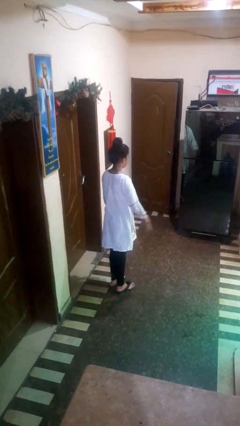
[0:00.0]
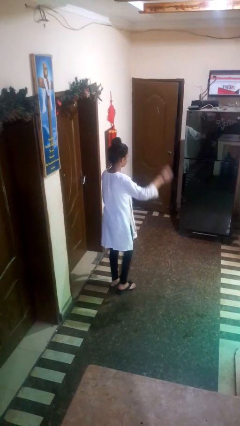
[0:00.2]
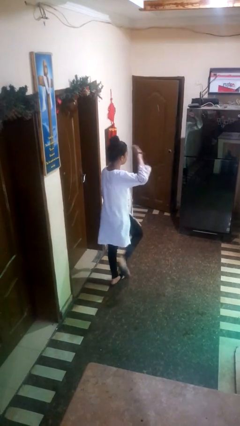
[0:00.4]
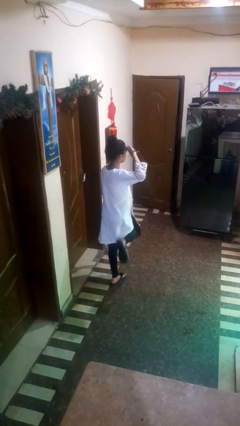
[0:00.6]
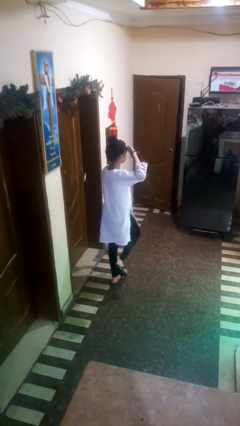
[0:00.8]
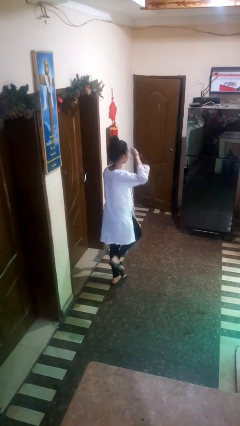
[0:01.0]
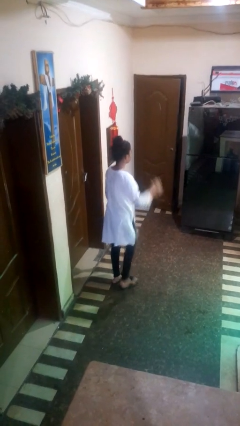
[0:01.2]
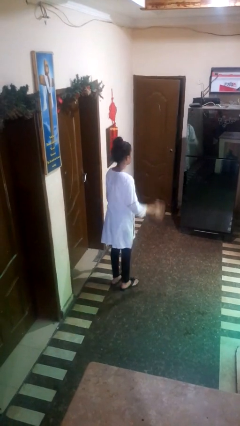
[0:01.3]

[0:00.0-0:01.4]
person salutes

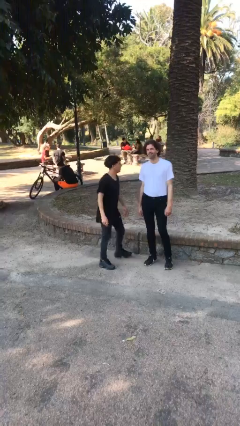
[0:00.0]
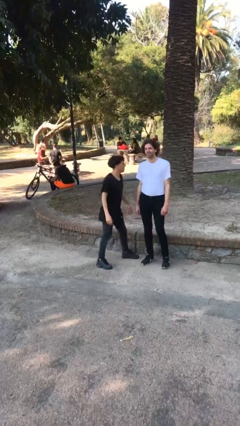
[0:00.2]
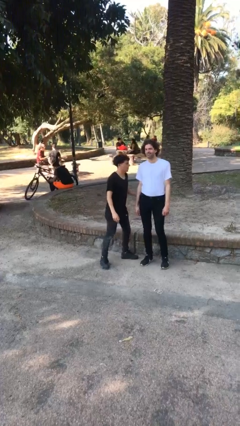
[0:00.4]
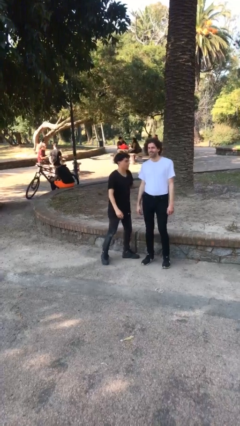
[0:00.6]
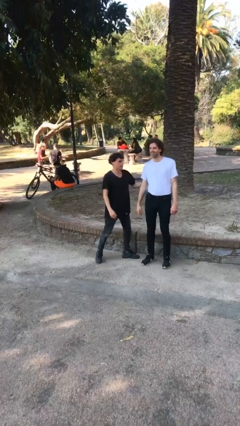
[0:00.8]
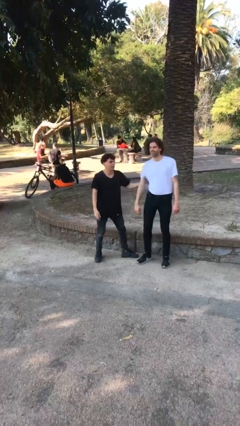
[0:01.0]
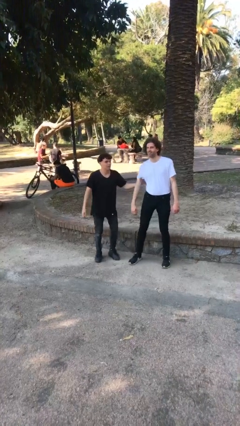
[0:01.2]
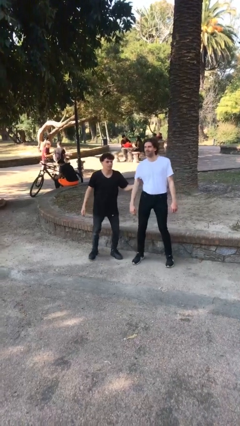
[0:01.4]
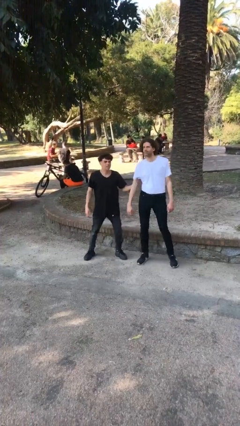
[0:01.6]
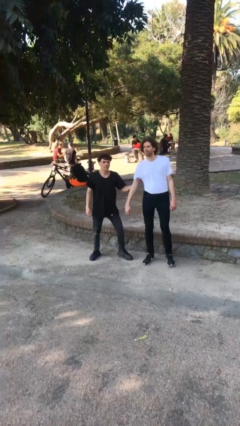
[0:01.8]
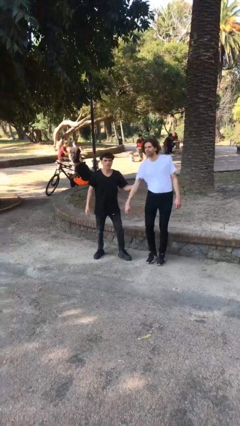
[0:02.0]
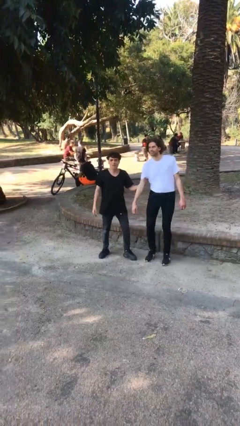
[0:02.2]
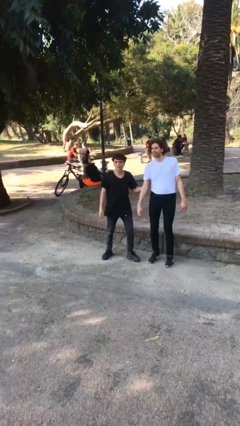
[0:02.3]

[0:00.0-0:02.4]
person grabs person by bicep

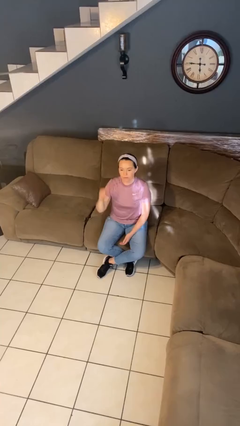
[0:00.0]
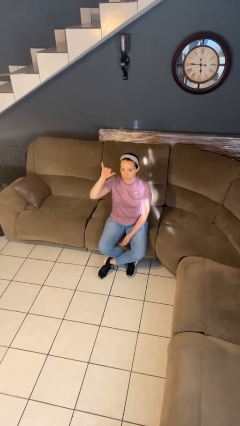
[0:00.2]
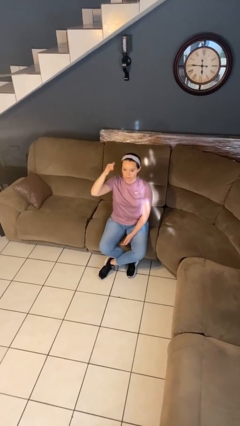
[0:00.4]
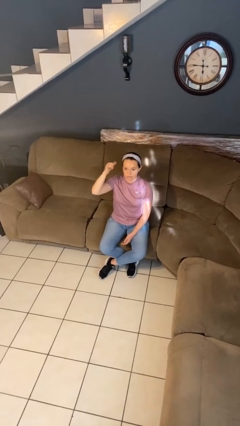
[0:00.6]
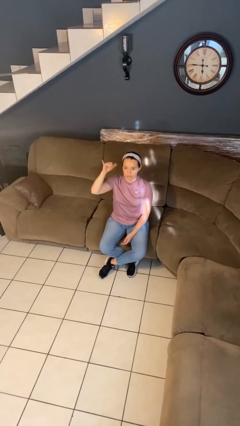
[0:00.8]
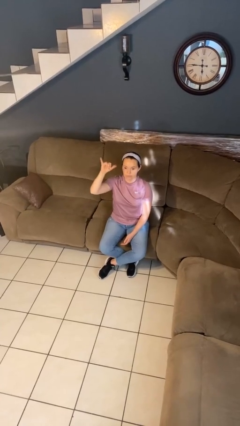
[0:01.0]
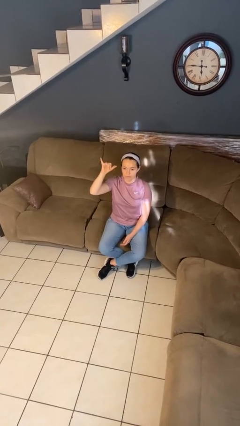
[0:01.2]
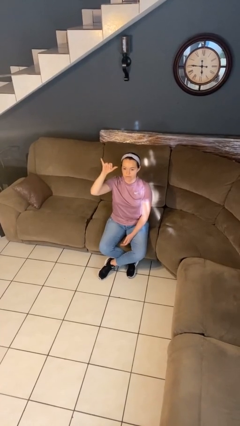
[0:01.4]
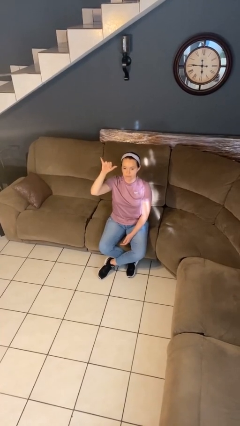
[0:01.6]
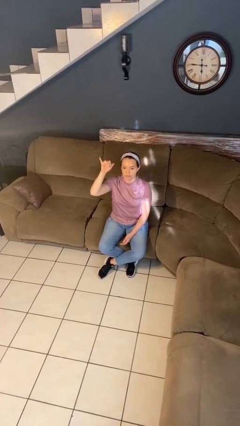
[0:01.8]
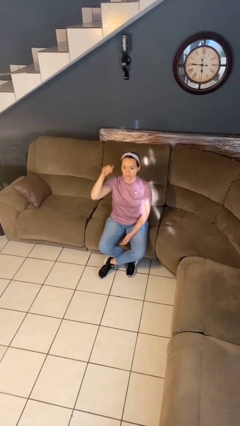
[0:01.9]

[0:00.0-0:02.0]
person gestures hang loose

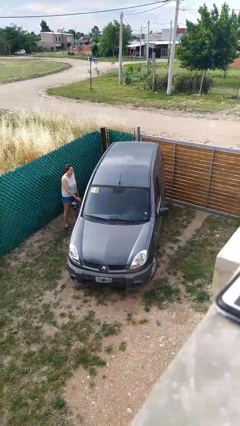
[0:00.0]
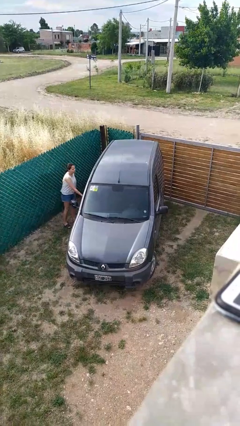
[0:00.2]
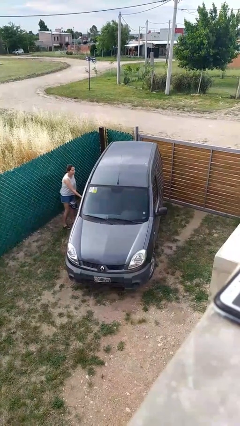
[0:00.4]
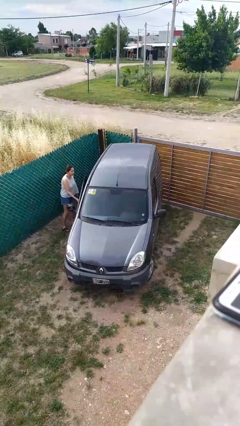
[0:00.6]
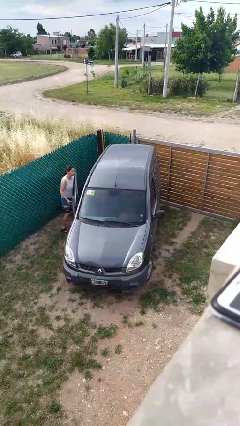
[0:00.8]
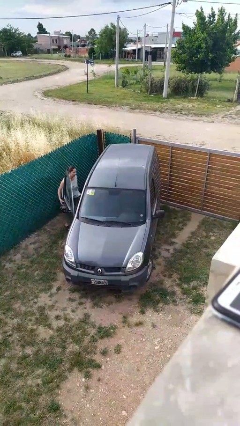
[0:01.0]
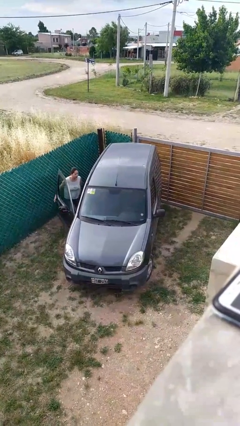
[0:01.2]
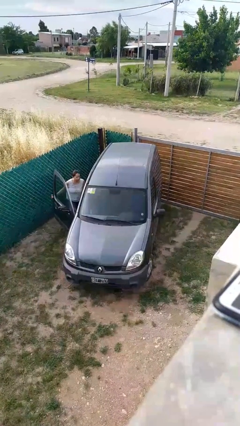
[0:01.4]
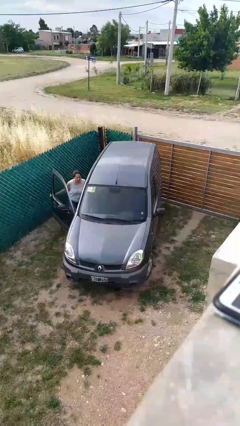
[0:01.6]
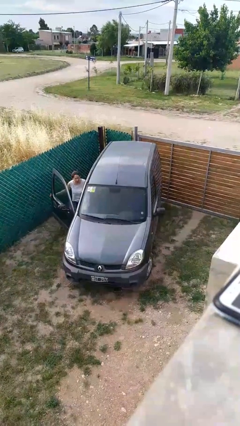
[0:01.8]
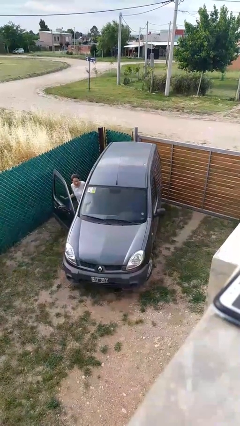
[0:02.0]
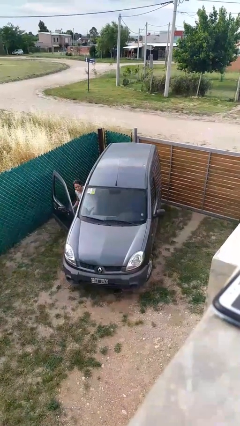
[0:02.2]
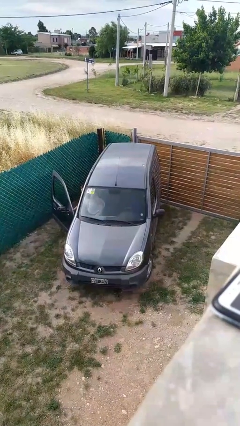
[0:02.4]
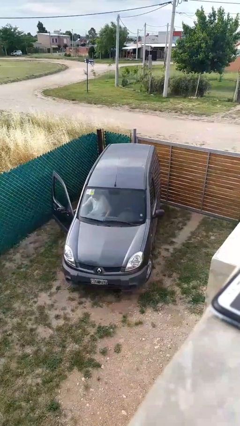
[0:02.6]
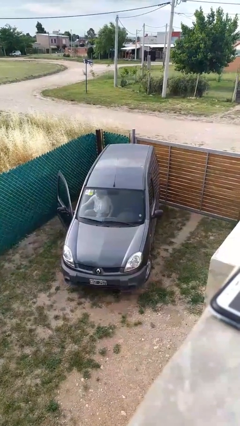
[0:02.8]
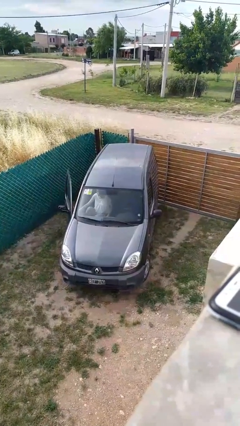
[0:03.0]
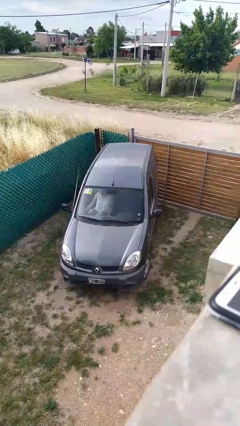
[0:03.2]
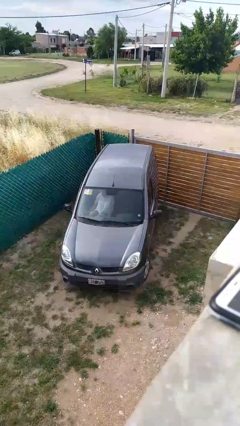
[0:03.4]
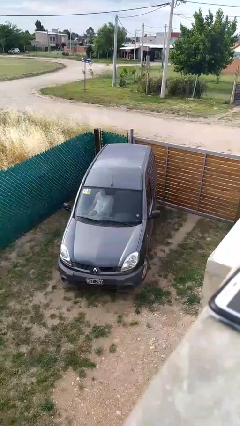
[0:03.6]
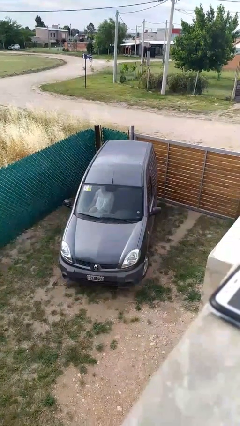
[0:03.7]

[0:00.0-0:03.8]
car picks up person

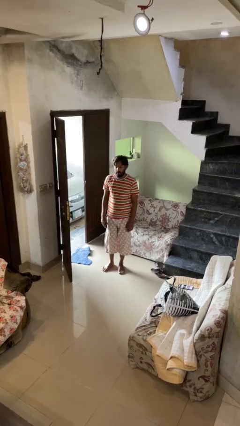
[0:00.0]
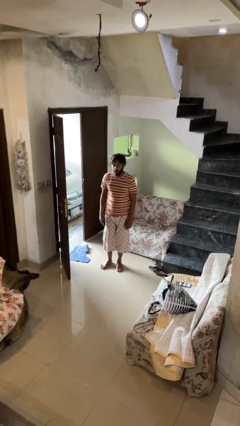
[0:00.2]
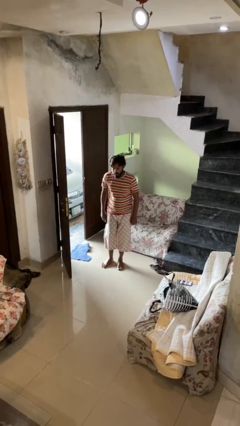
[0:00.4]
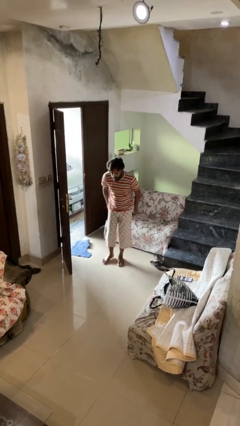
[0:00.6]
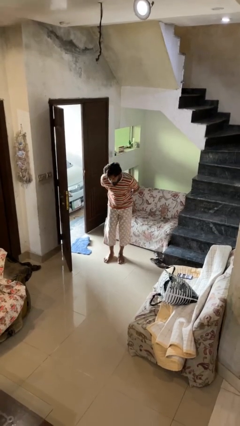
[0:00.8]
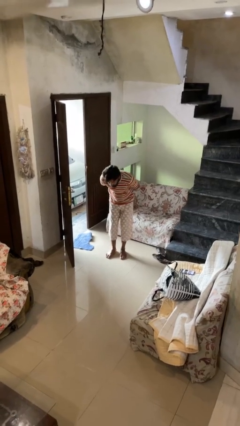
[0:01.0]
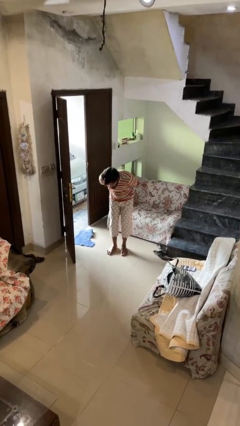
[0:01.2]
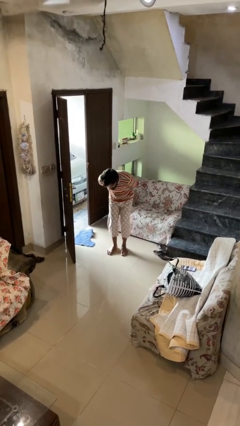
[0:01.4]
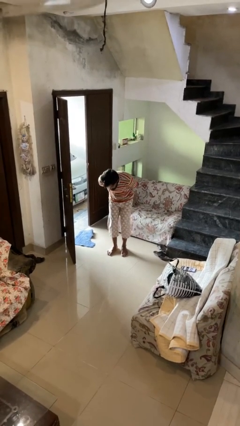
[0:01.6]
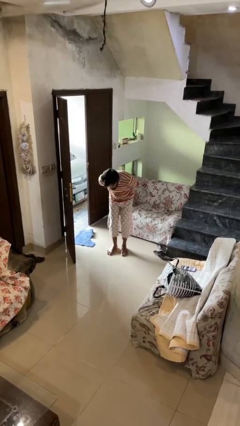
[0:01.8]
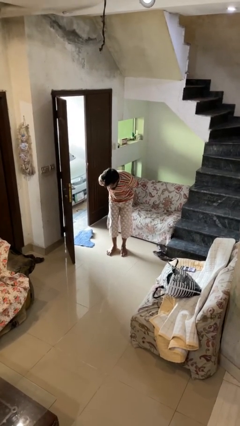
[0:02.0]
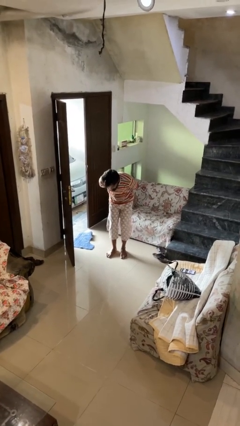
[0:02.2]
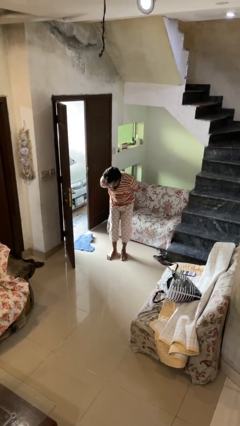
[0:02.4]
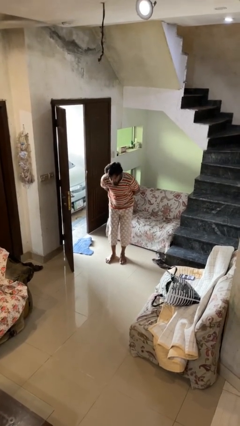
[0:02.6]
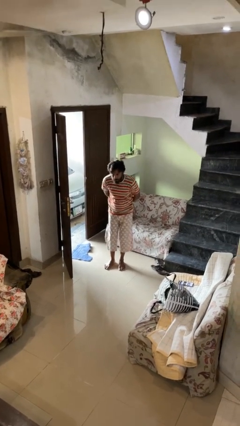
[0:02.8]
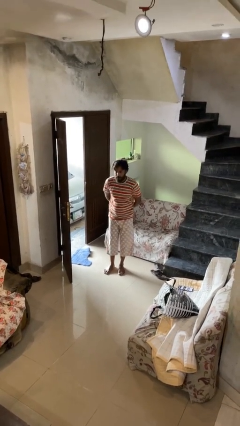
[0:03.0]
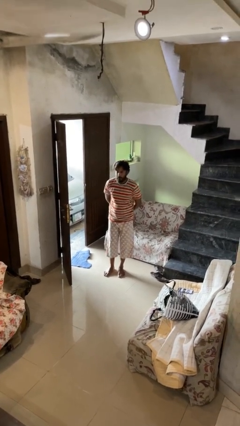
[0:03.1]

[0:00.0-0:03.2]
person bows

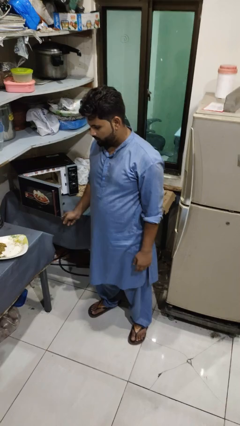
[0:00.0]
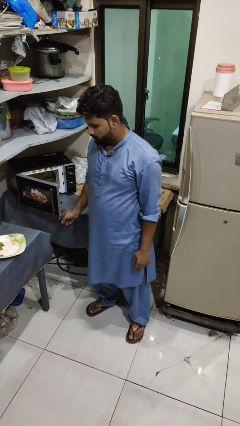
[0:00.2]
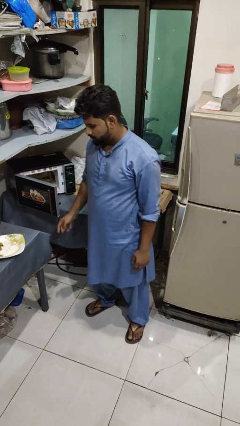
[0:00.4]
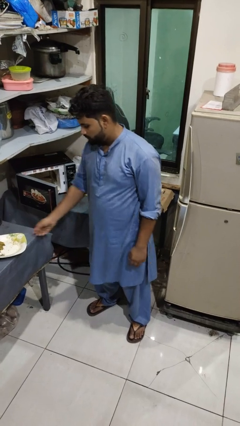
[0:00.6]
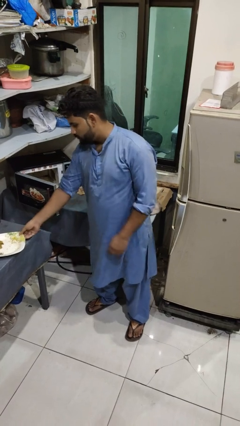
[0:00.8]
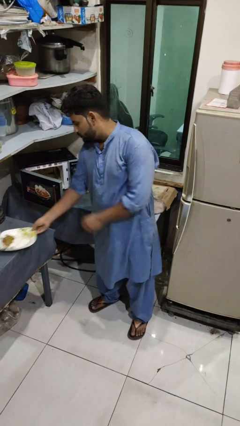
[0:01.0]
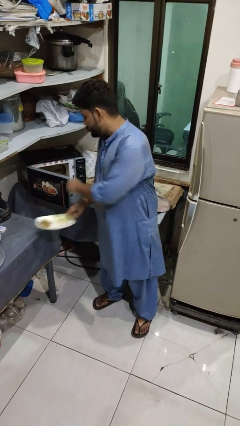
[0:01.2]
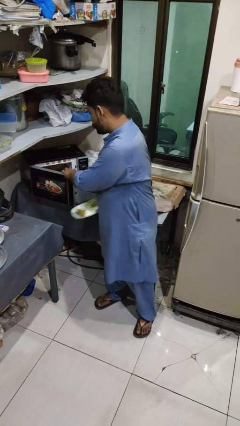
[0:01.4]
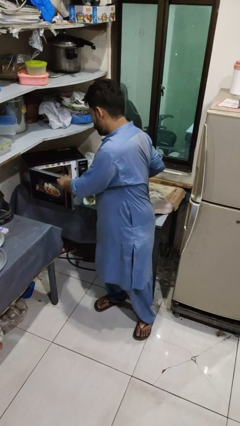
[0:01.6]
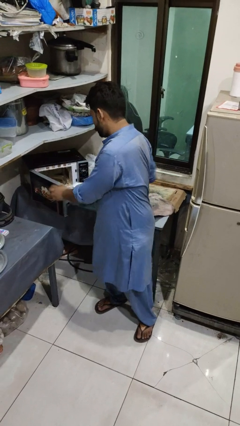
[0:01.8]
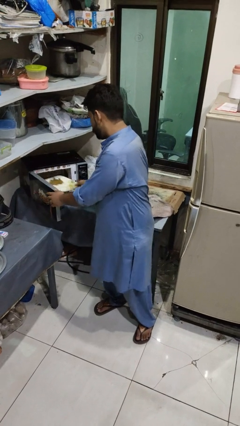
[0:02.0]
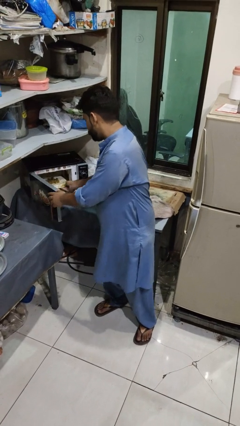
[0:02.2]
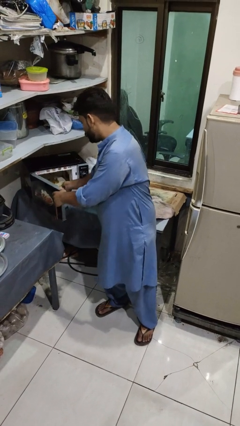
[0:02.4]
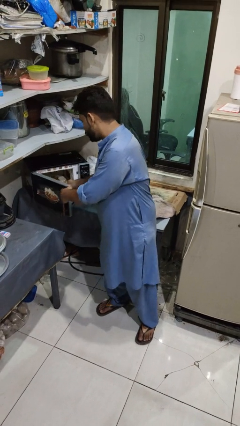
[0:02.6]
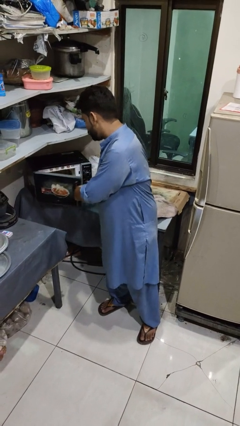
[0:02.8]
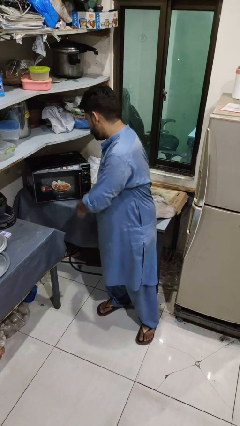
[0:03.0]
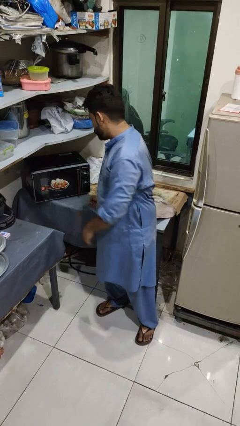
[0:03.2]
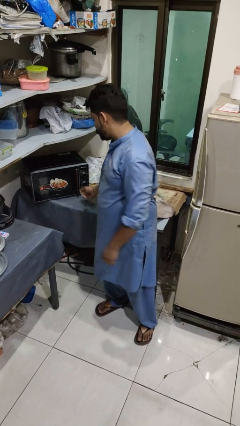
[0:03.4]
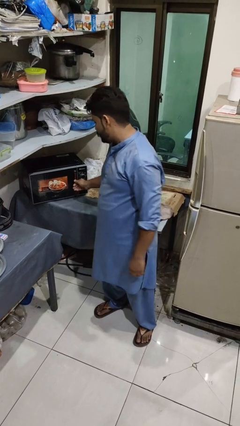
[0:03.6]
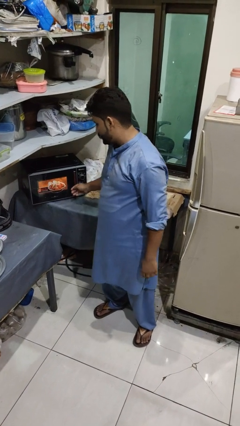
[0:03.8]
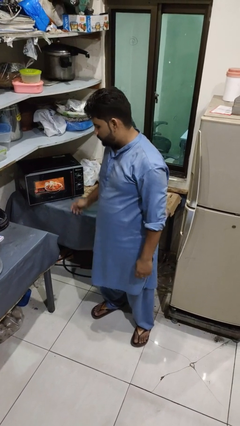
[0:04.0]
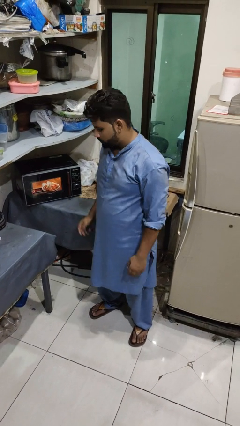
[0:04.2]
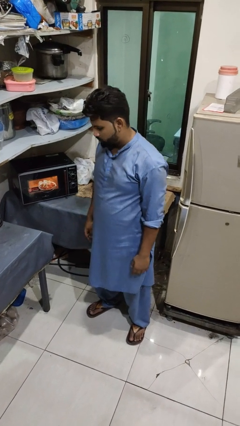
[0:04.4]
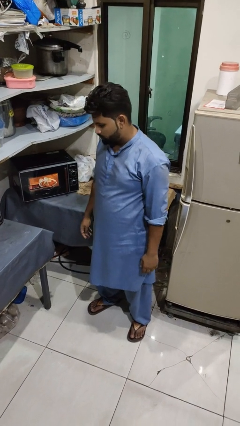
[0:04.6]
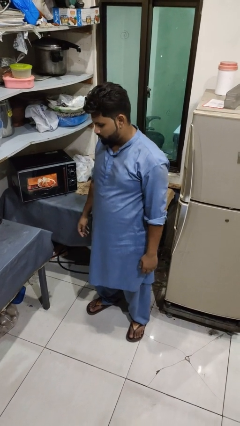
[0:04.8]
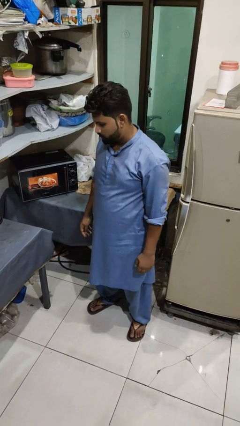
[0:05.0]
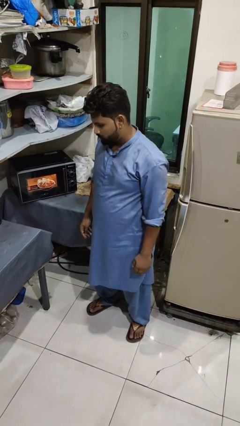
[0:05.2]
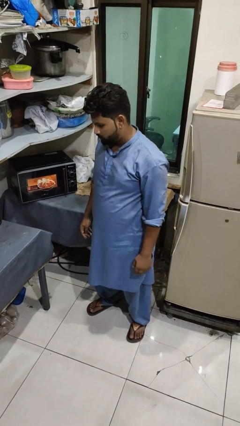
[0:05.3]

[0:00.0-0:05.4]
person puts object into microwave
